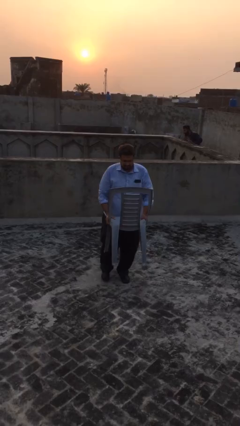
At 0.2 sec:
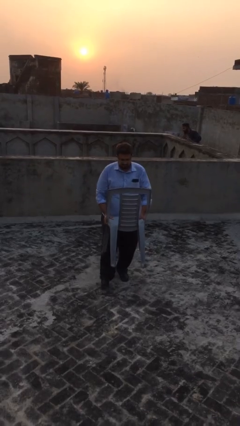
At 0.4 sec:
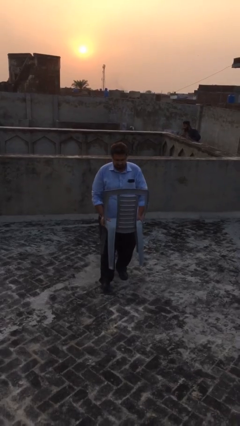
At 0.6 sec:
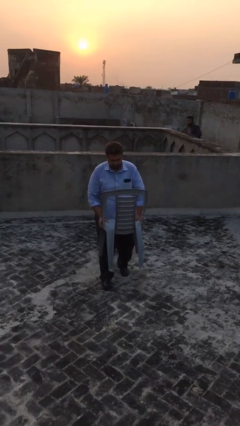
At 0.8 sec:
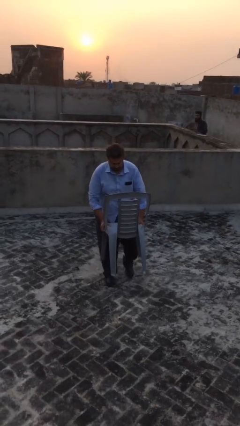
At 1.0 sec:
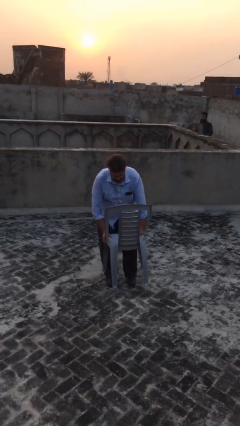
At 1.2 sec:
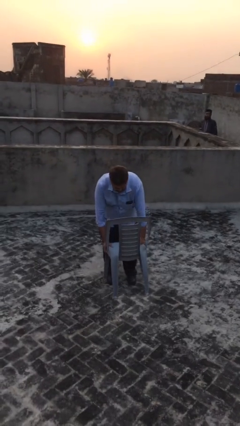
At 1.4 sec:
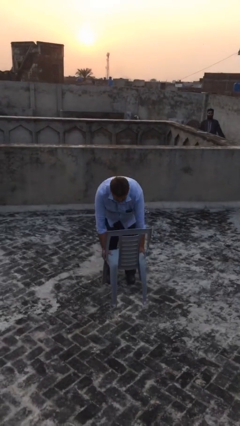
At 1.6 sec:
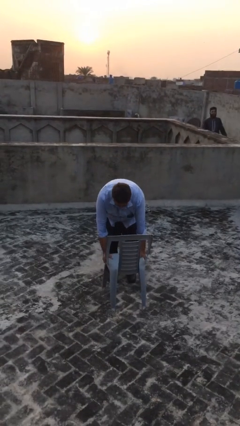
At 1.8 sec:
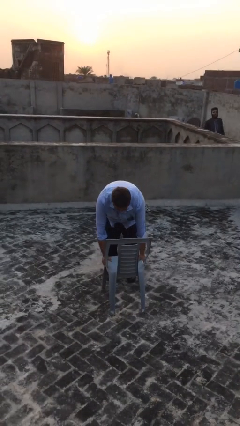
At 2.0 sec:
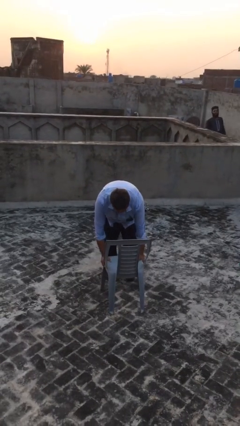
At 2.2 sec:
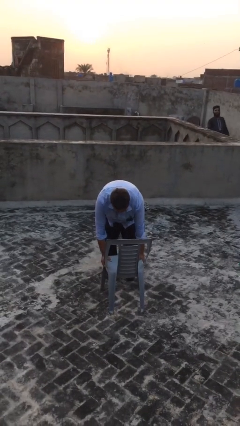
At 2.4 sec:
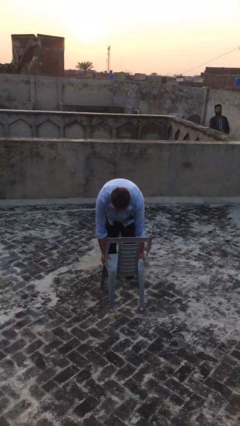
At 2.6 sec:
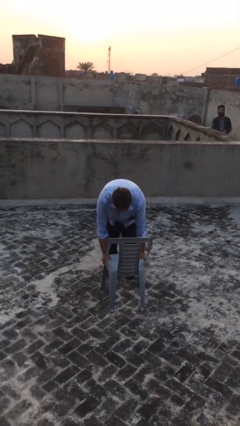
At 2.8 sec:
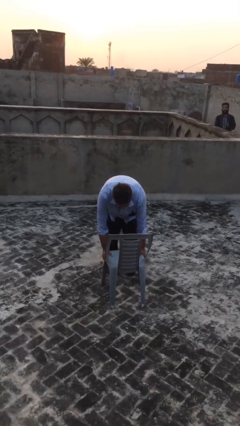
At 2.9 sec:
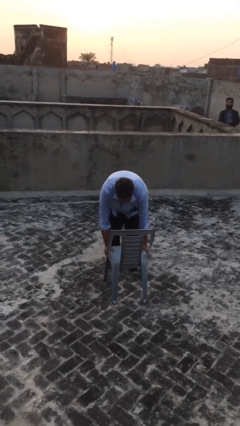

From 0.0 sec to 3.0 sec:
person puts down object on floor

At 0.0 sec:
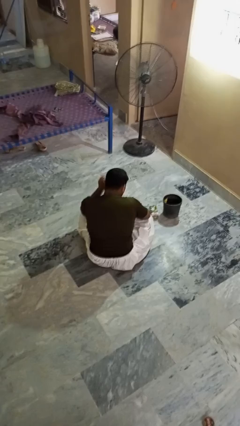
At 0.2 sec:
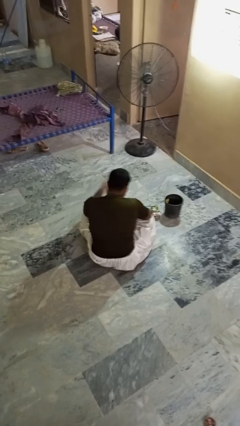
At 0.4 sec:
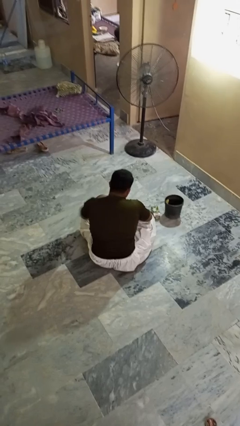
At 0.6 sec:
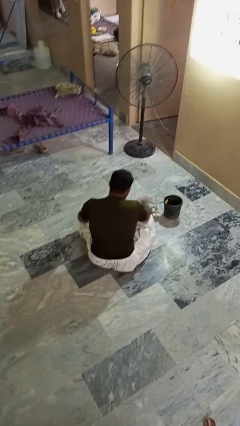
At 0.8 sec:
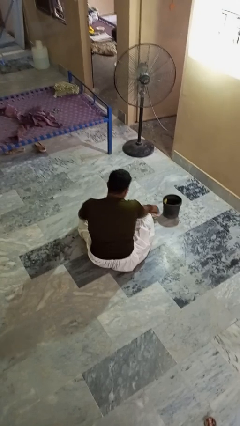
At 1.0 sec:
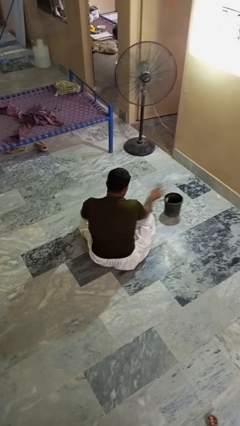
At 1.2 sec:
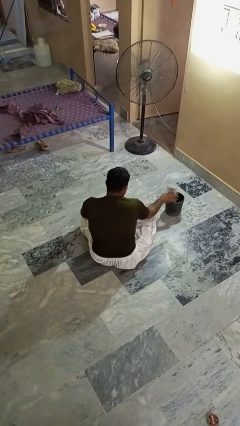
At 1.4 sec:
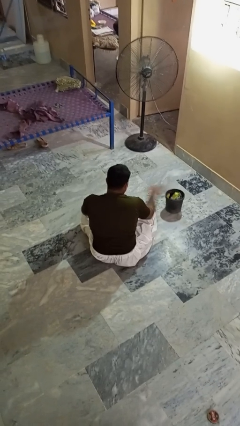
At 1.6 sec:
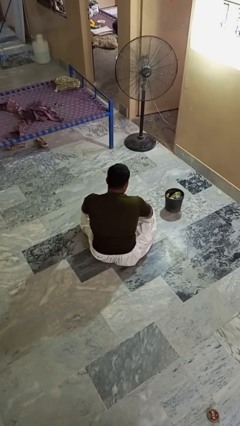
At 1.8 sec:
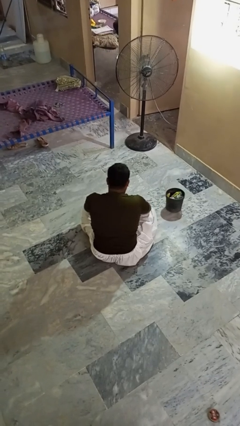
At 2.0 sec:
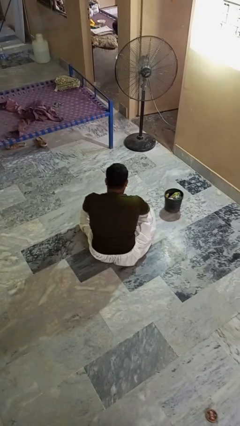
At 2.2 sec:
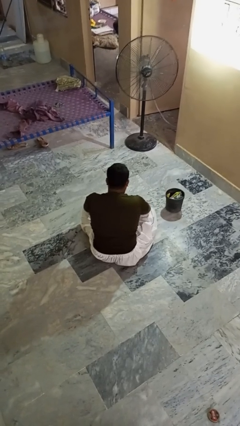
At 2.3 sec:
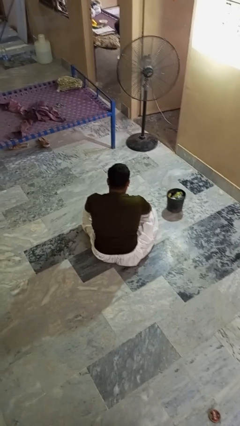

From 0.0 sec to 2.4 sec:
person puts object into basket

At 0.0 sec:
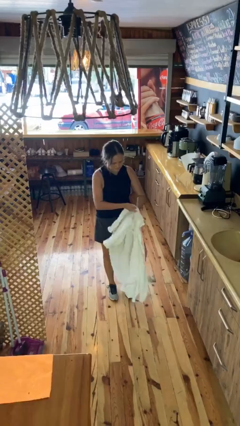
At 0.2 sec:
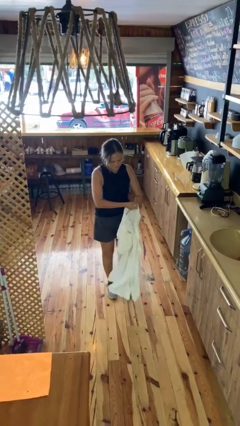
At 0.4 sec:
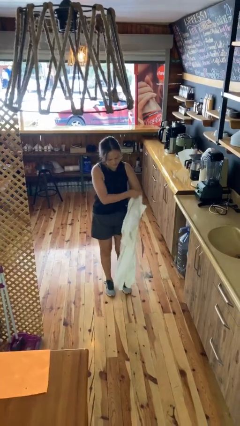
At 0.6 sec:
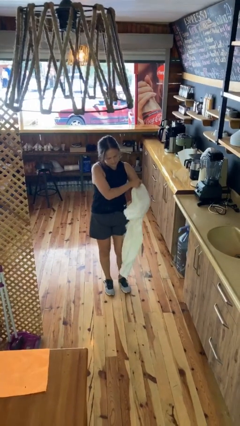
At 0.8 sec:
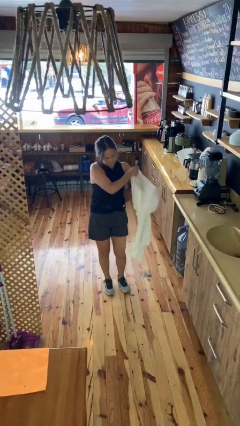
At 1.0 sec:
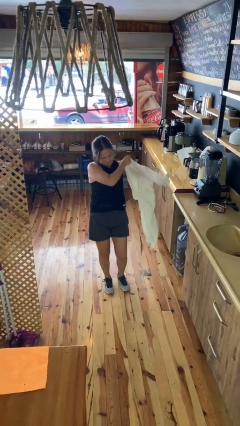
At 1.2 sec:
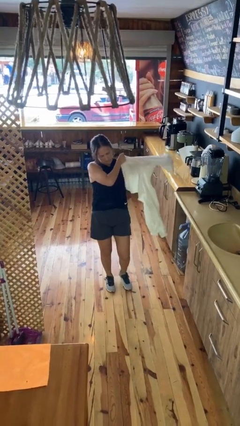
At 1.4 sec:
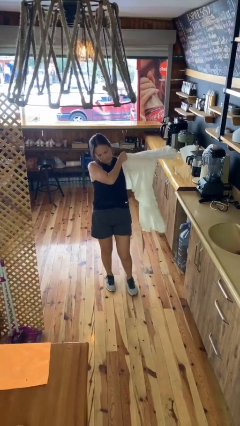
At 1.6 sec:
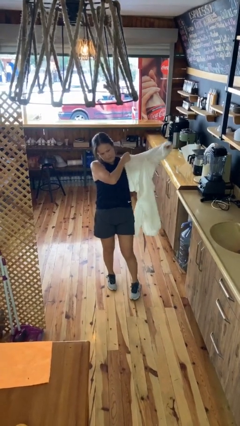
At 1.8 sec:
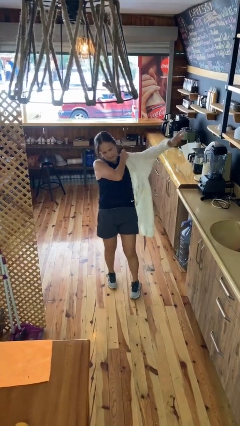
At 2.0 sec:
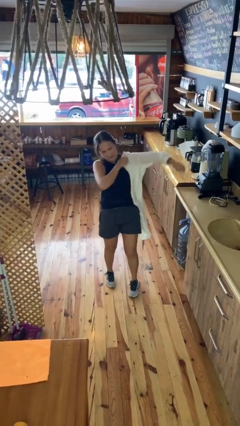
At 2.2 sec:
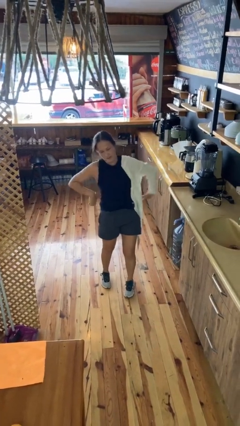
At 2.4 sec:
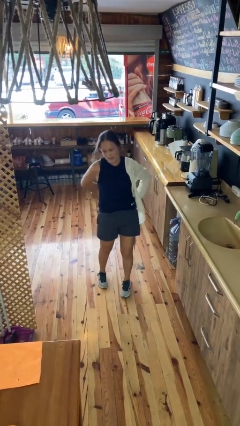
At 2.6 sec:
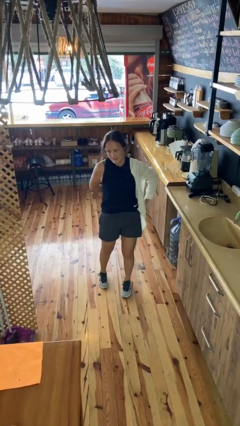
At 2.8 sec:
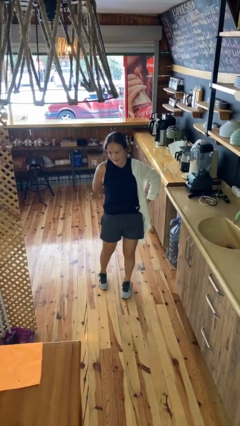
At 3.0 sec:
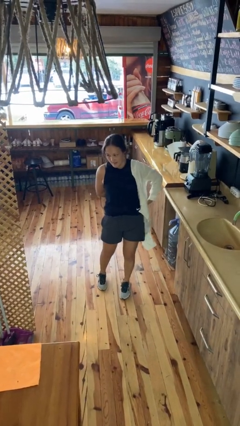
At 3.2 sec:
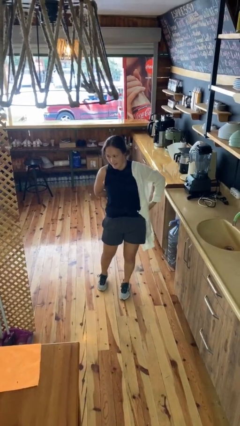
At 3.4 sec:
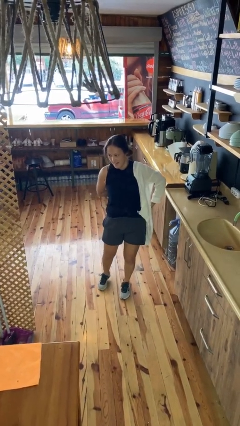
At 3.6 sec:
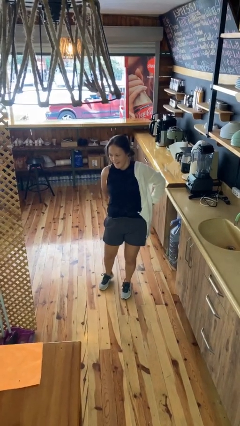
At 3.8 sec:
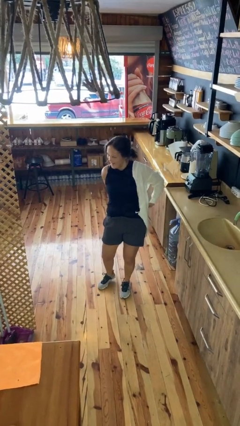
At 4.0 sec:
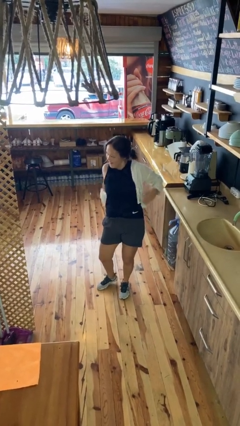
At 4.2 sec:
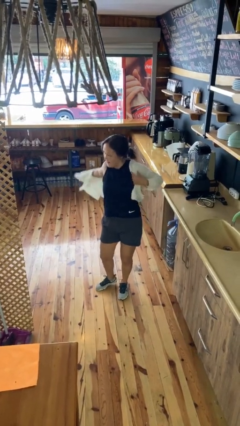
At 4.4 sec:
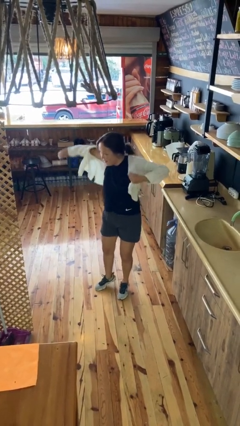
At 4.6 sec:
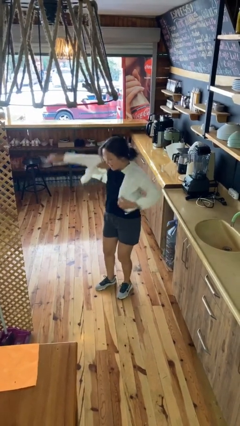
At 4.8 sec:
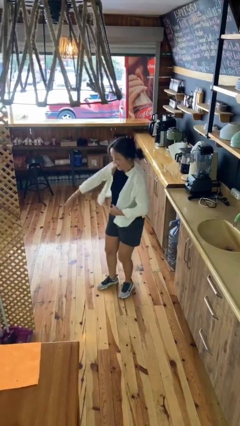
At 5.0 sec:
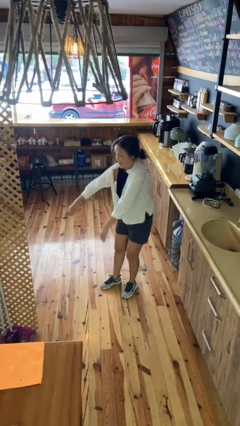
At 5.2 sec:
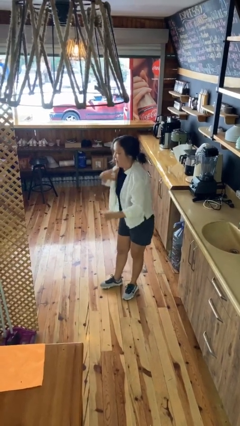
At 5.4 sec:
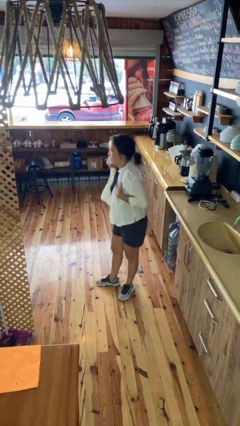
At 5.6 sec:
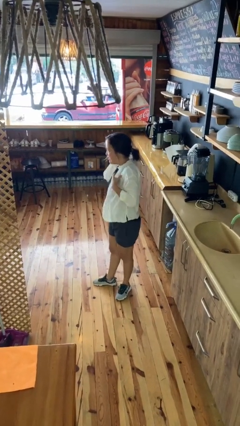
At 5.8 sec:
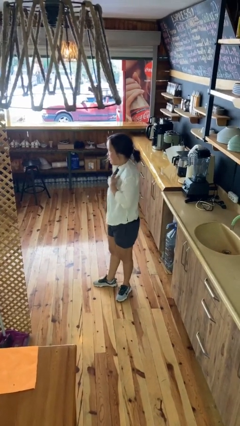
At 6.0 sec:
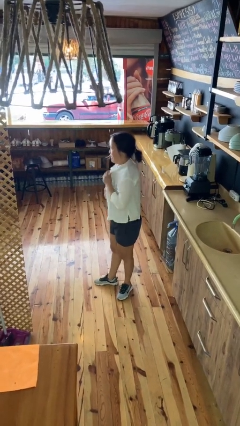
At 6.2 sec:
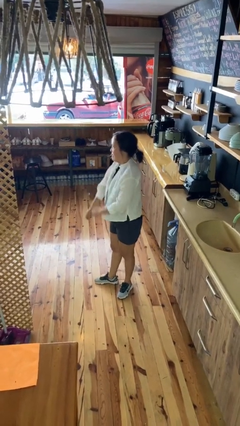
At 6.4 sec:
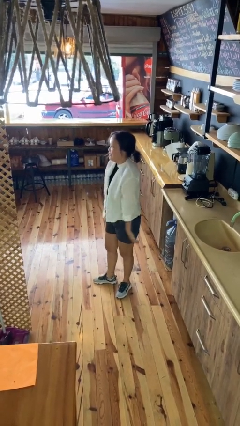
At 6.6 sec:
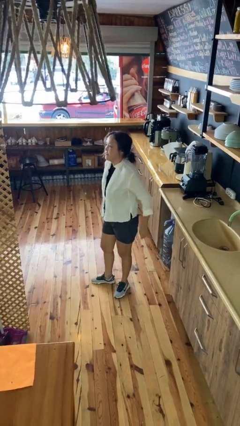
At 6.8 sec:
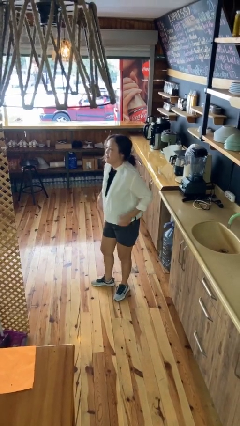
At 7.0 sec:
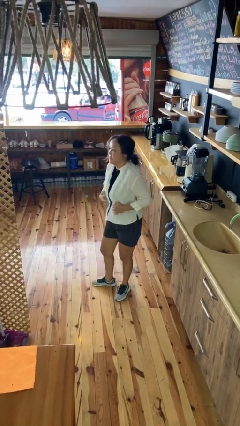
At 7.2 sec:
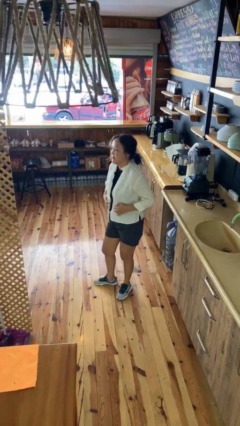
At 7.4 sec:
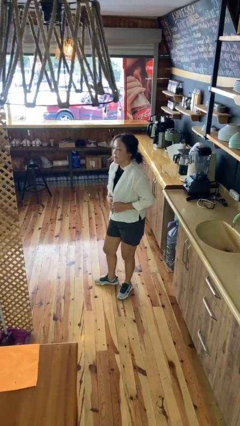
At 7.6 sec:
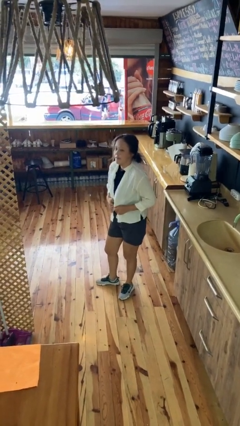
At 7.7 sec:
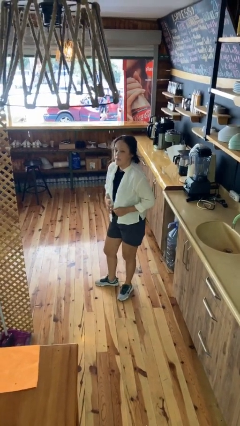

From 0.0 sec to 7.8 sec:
person puts on shirt

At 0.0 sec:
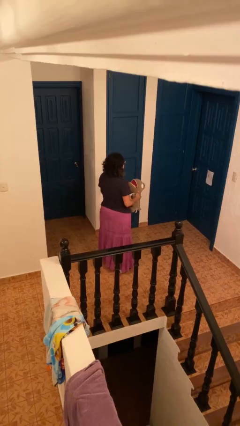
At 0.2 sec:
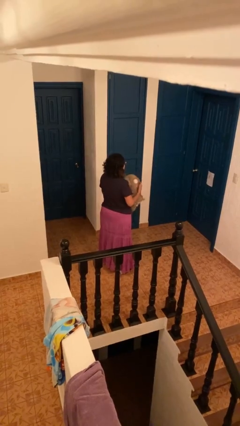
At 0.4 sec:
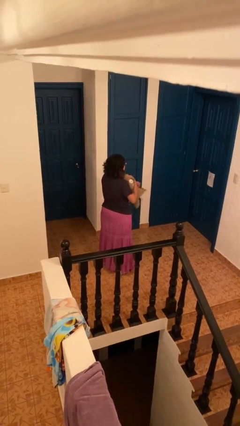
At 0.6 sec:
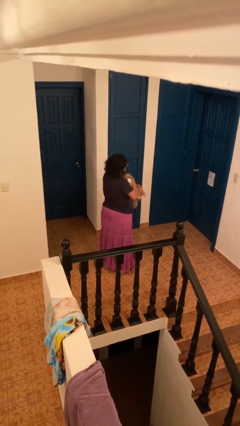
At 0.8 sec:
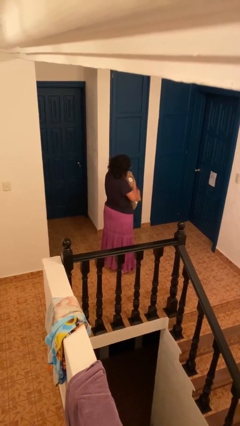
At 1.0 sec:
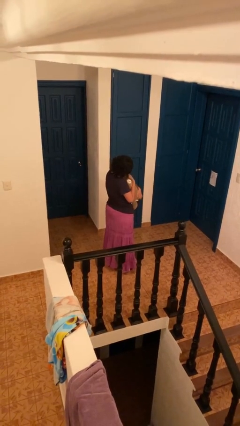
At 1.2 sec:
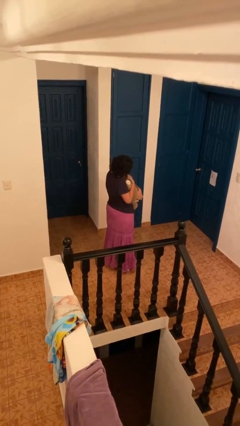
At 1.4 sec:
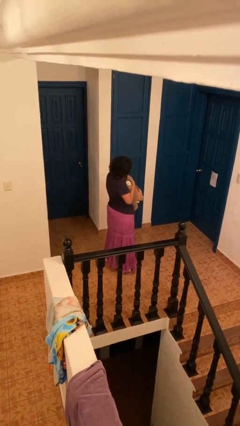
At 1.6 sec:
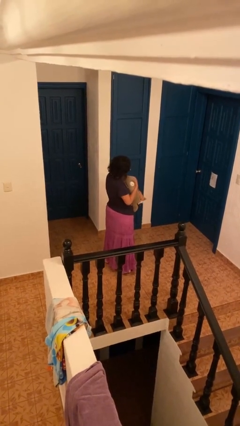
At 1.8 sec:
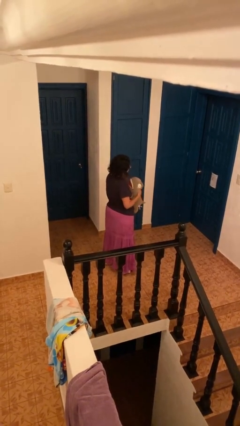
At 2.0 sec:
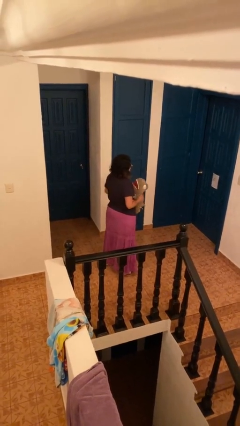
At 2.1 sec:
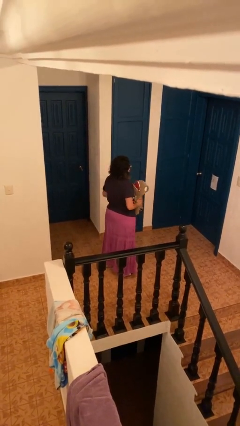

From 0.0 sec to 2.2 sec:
person hugs stuffed animal

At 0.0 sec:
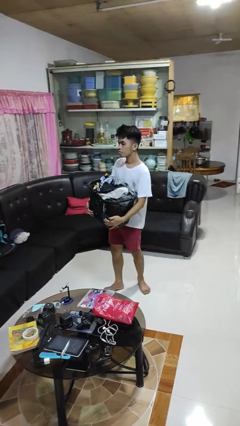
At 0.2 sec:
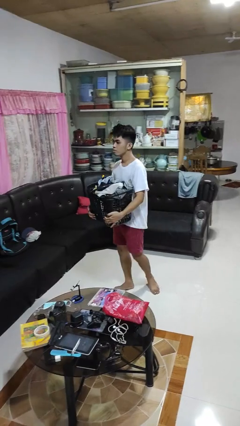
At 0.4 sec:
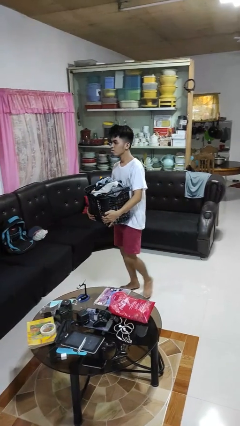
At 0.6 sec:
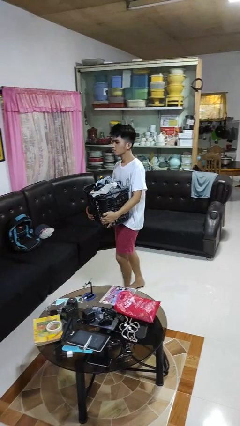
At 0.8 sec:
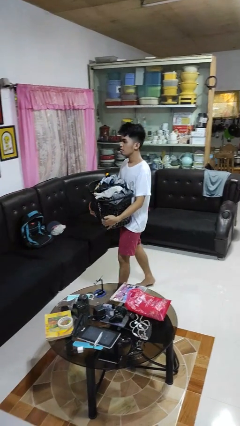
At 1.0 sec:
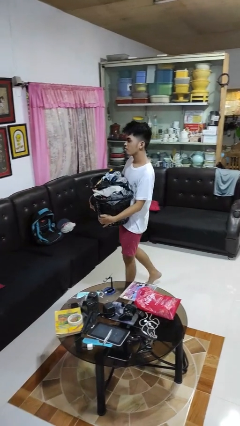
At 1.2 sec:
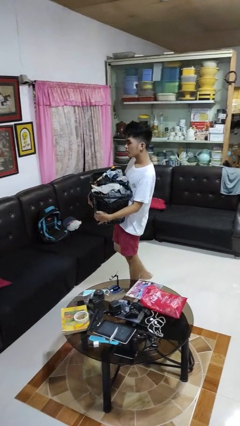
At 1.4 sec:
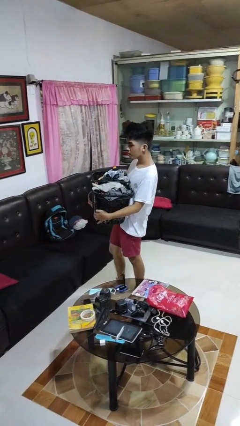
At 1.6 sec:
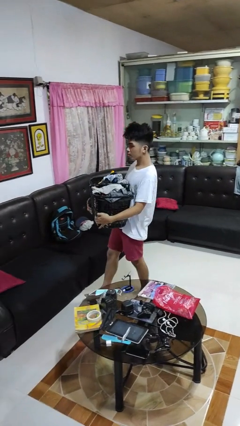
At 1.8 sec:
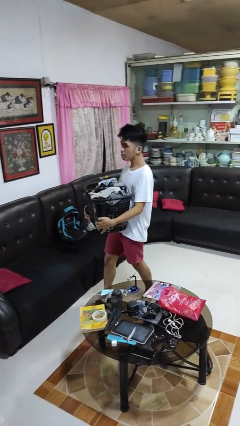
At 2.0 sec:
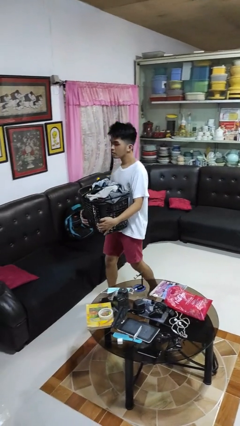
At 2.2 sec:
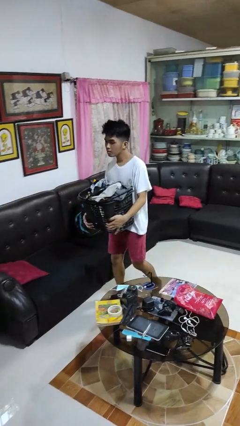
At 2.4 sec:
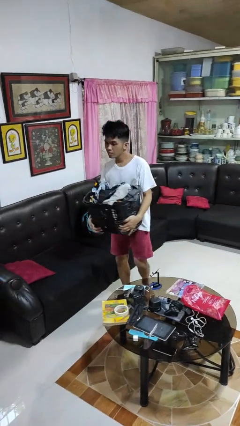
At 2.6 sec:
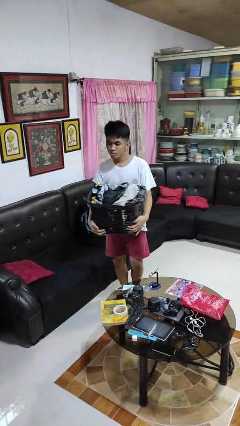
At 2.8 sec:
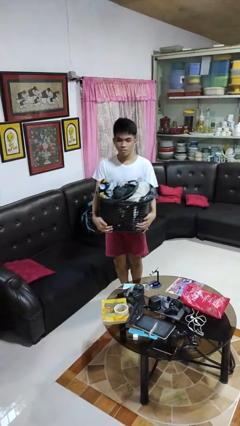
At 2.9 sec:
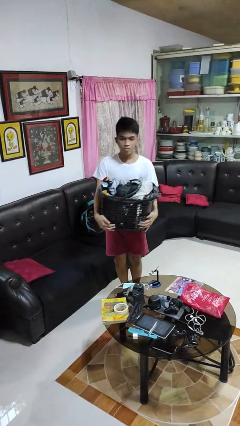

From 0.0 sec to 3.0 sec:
person carries laundry basket
